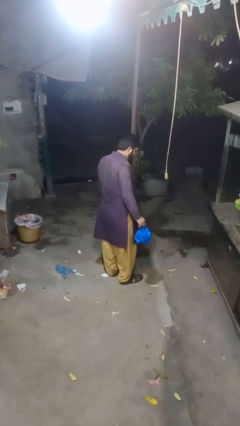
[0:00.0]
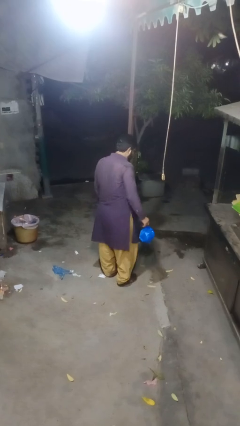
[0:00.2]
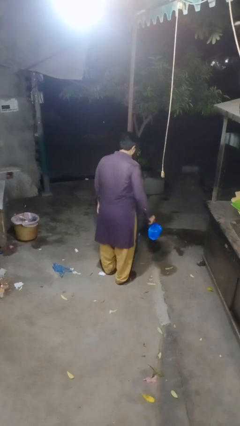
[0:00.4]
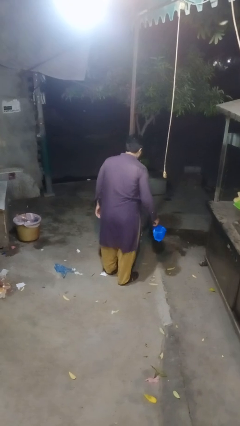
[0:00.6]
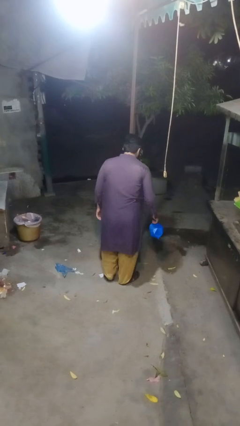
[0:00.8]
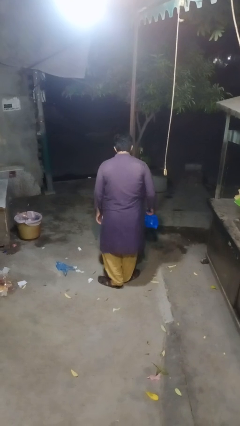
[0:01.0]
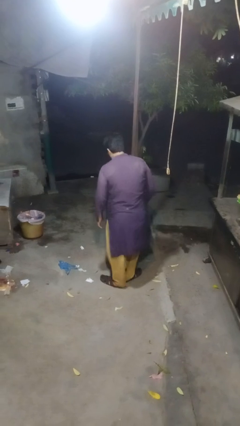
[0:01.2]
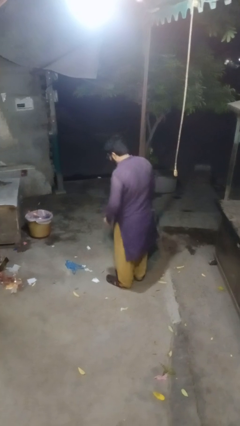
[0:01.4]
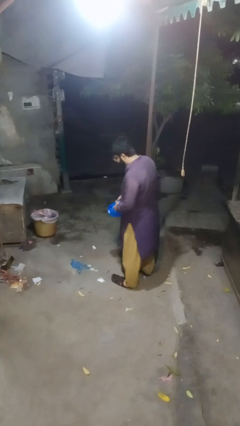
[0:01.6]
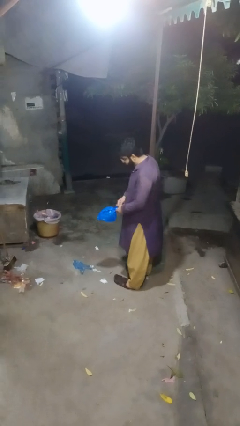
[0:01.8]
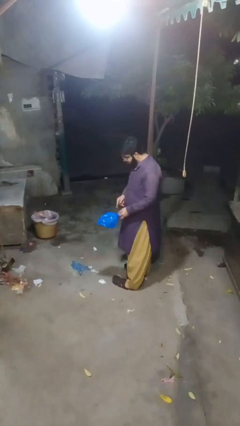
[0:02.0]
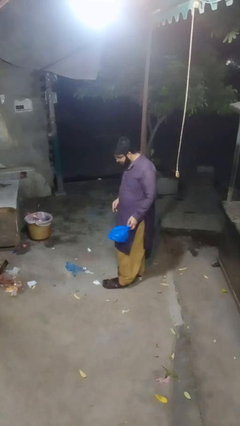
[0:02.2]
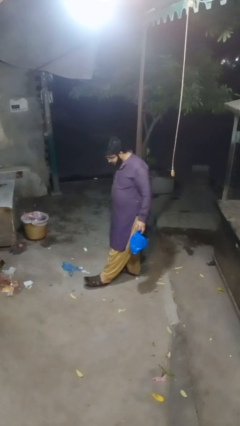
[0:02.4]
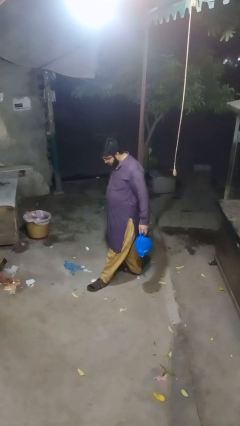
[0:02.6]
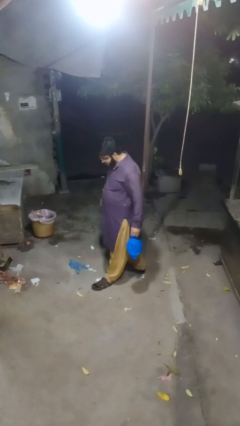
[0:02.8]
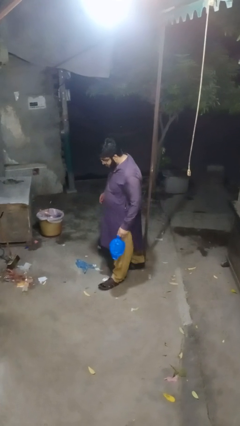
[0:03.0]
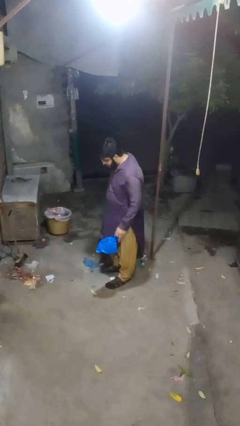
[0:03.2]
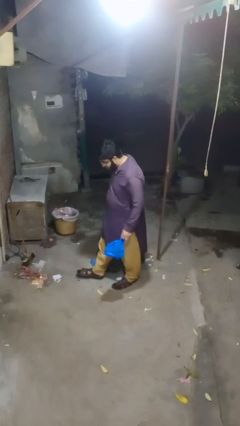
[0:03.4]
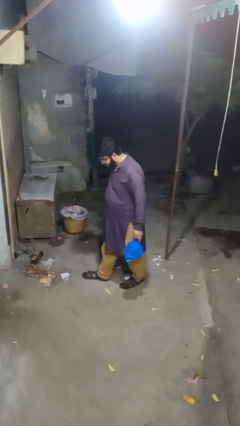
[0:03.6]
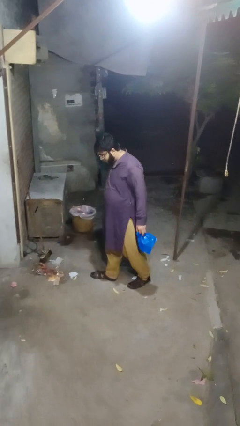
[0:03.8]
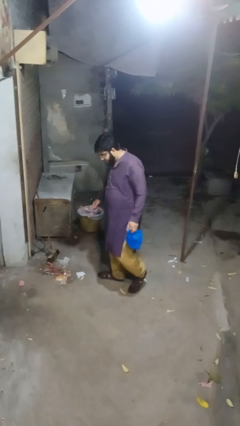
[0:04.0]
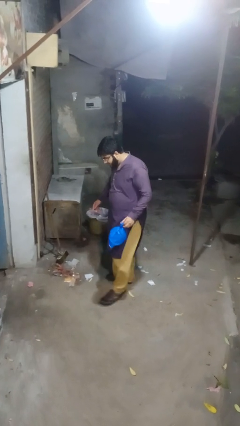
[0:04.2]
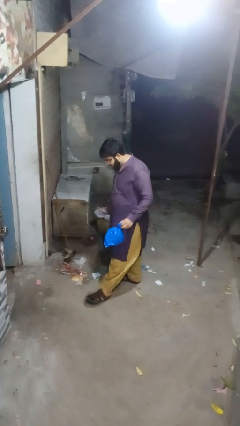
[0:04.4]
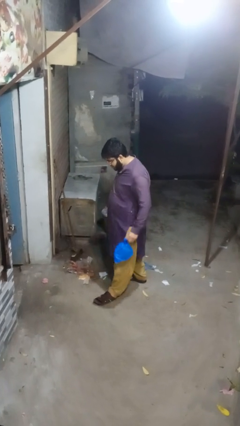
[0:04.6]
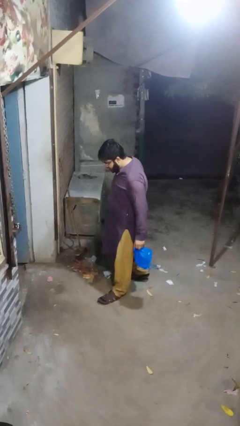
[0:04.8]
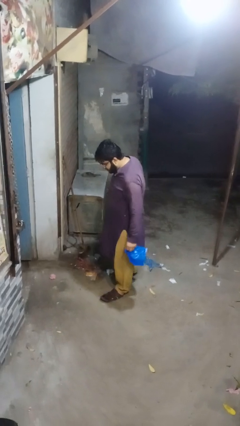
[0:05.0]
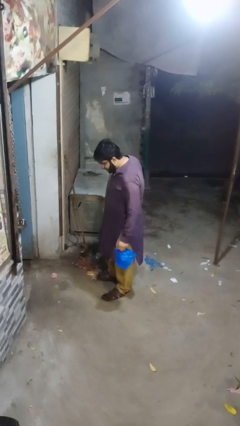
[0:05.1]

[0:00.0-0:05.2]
person carries groceries

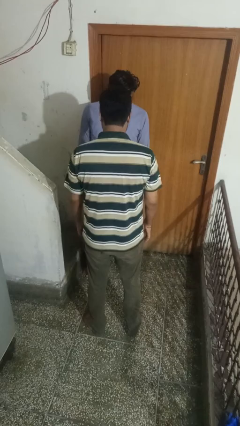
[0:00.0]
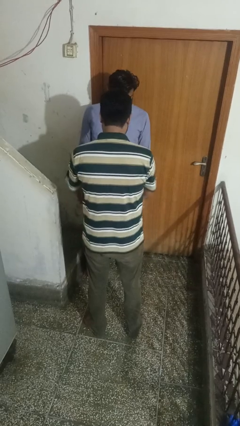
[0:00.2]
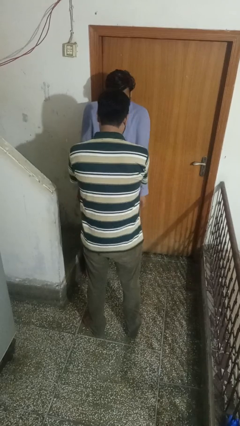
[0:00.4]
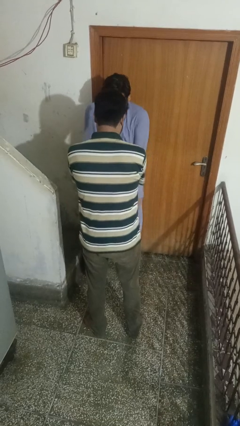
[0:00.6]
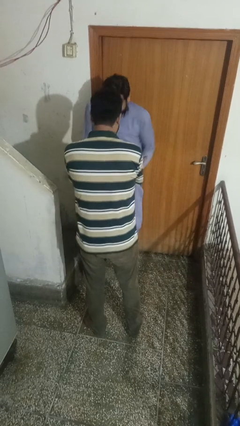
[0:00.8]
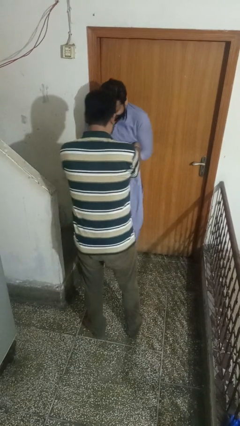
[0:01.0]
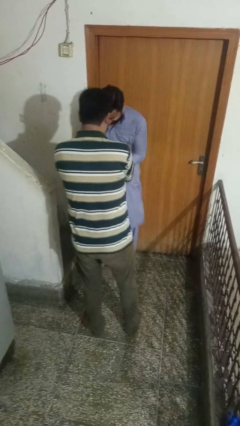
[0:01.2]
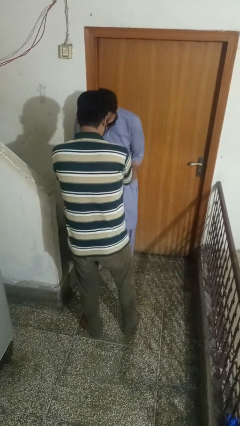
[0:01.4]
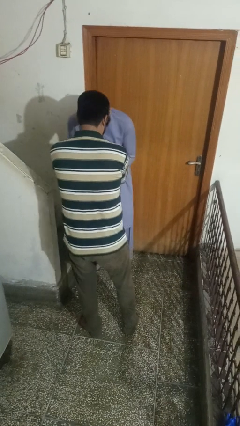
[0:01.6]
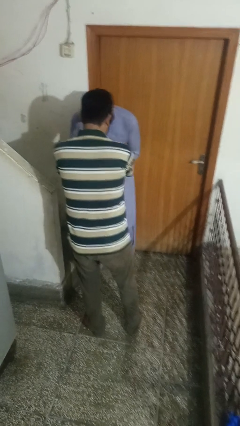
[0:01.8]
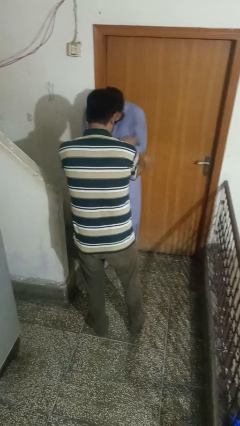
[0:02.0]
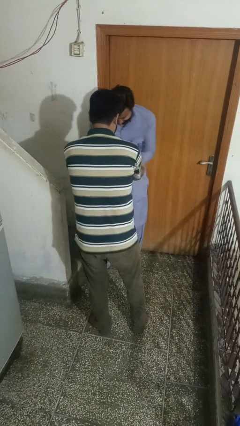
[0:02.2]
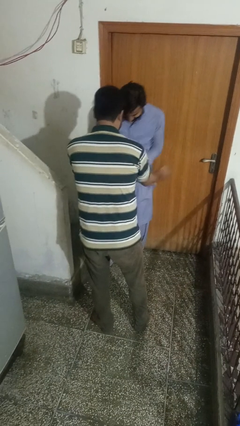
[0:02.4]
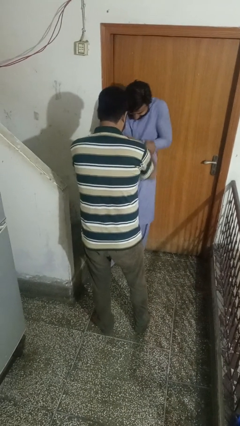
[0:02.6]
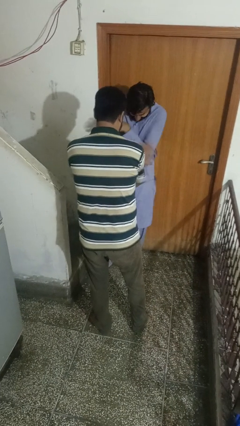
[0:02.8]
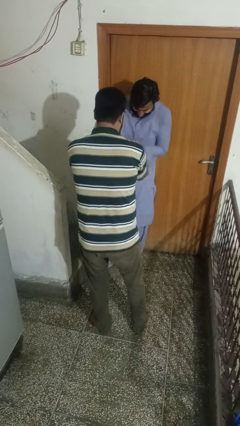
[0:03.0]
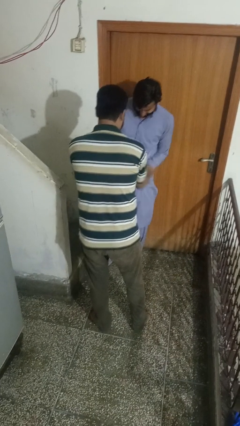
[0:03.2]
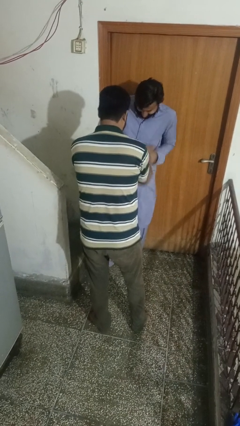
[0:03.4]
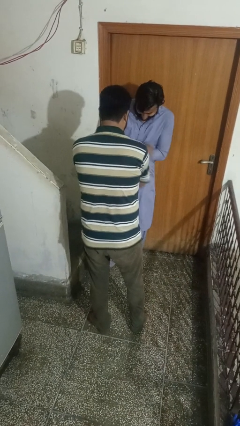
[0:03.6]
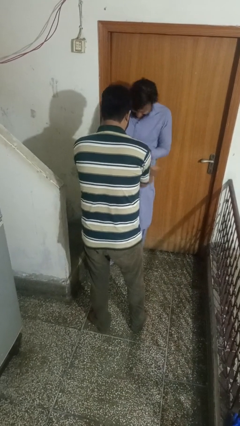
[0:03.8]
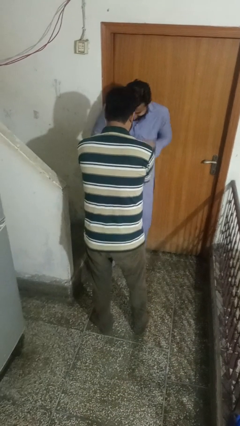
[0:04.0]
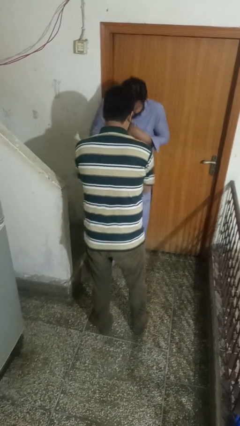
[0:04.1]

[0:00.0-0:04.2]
person tickles person

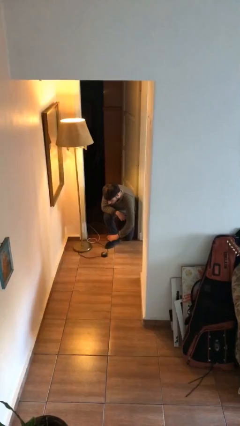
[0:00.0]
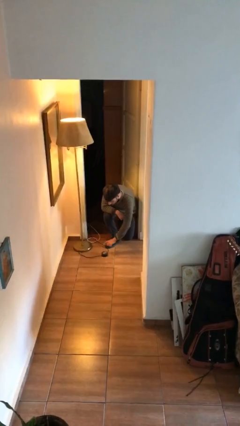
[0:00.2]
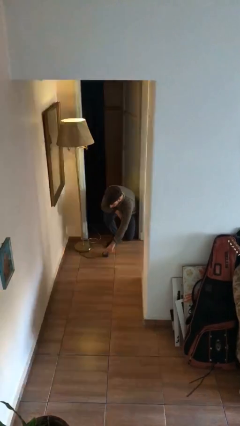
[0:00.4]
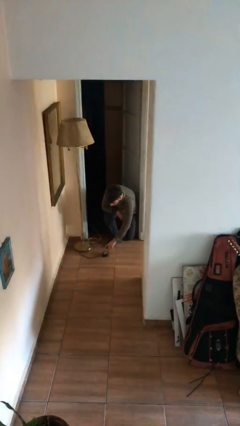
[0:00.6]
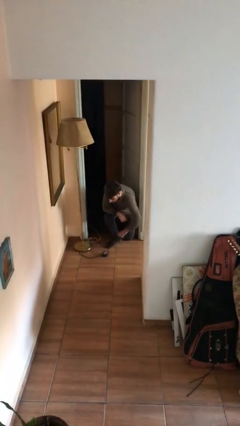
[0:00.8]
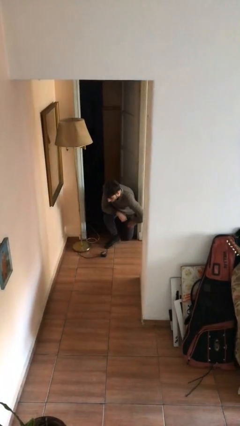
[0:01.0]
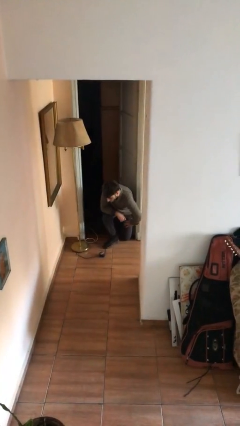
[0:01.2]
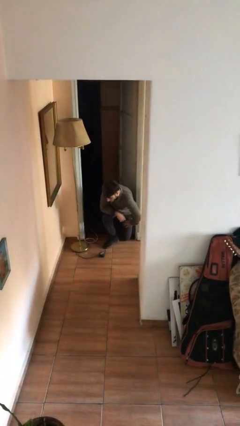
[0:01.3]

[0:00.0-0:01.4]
person turns off lamp

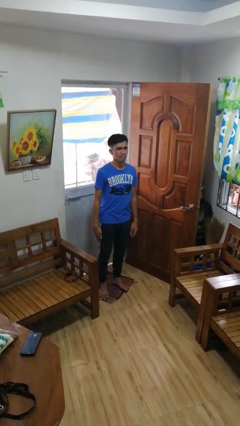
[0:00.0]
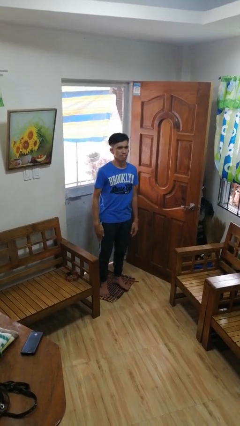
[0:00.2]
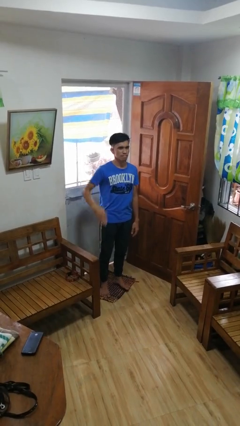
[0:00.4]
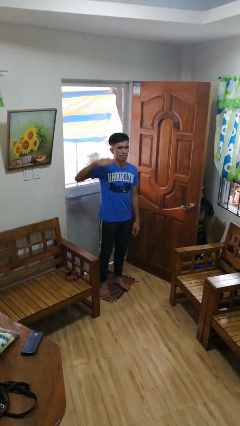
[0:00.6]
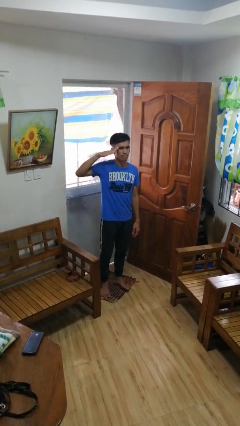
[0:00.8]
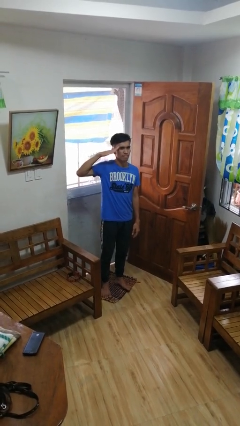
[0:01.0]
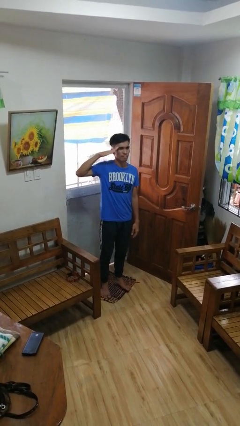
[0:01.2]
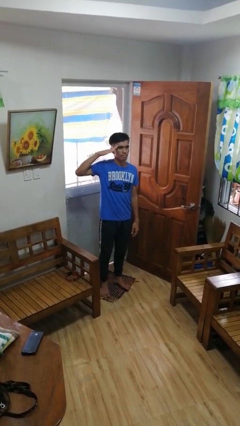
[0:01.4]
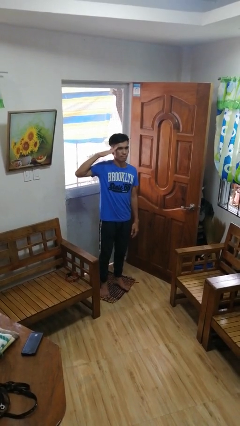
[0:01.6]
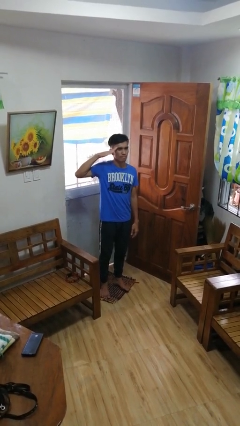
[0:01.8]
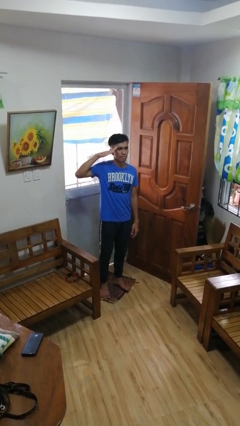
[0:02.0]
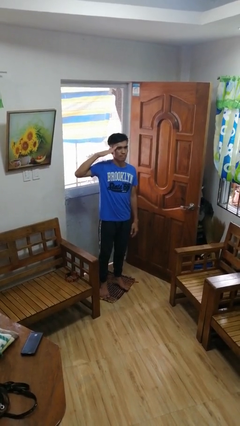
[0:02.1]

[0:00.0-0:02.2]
person salutes

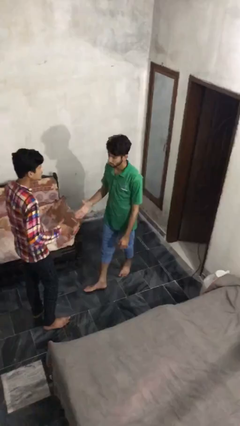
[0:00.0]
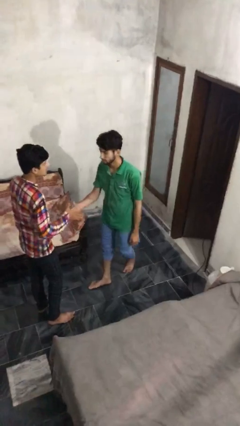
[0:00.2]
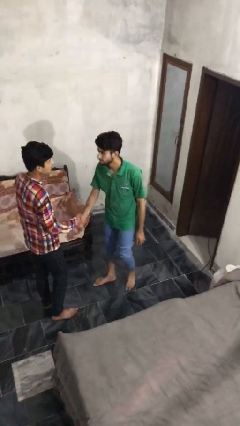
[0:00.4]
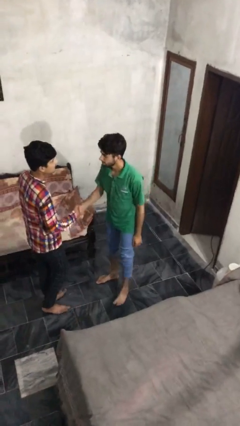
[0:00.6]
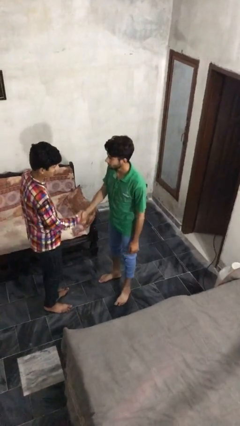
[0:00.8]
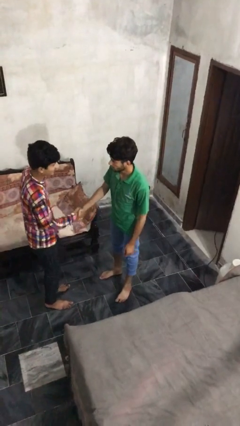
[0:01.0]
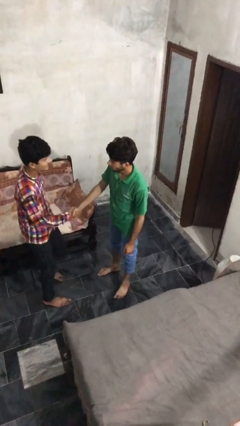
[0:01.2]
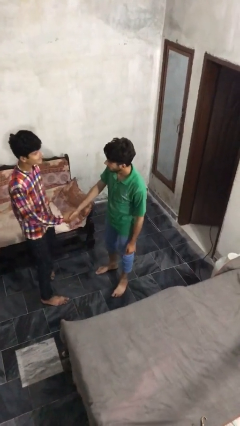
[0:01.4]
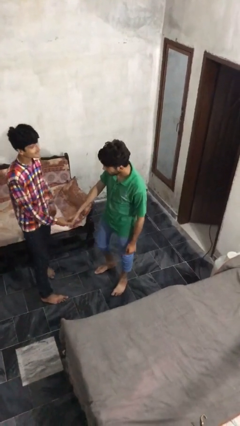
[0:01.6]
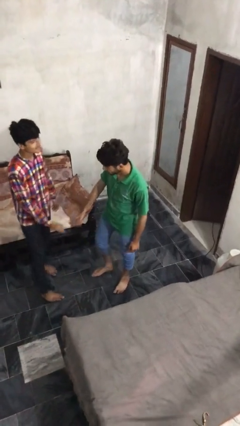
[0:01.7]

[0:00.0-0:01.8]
person shakes hand

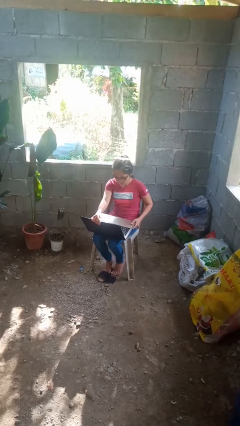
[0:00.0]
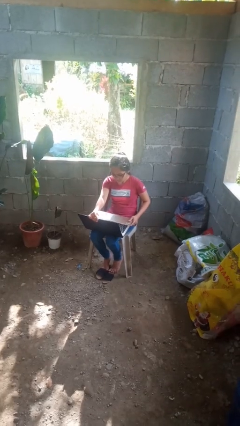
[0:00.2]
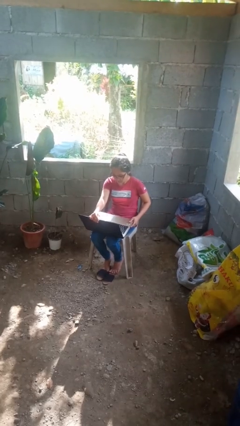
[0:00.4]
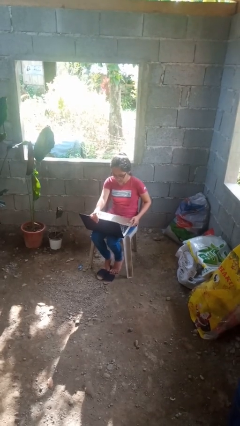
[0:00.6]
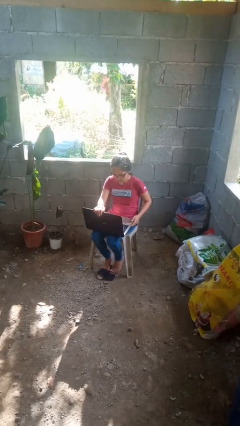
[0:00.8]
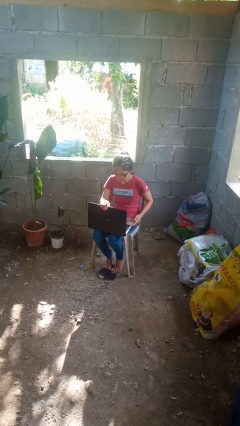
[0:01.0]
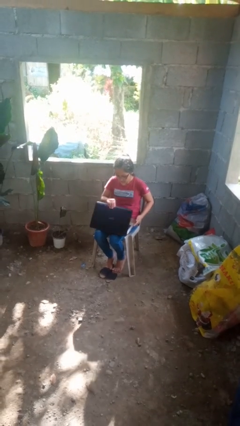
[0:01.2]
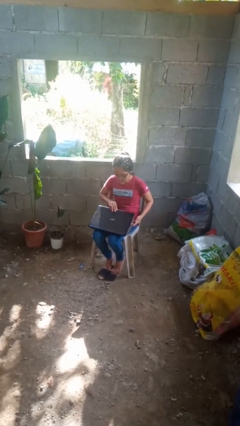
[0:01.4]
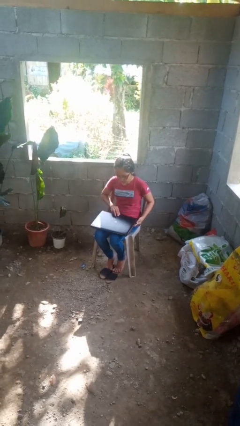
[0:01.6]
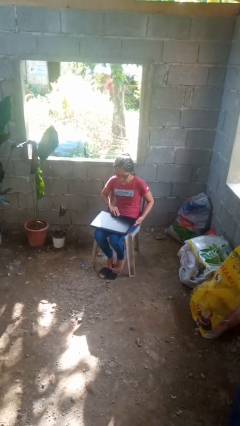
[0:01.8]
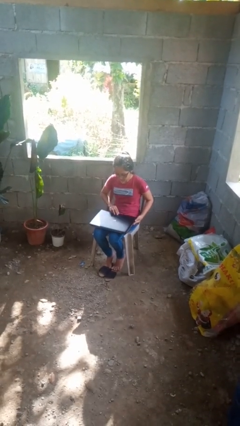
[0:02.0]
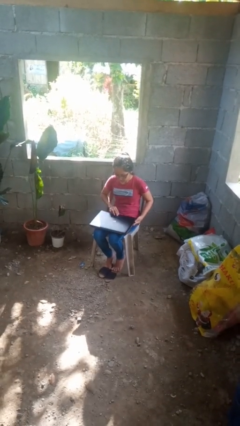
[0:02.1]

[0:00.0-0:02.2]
person closes laptop

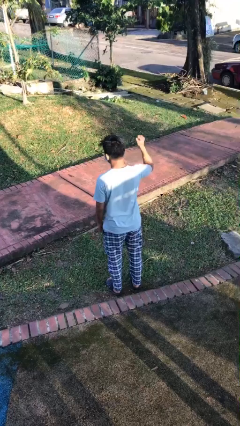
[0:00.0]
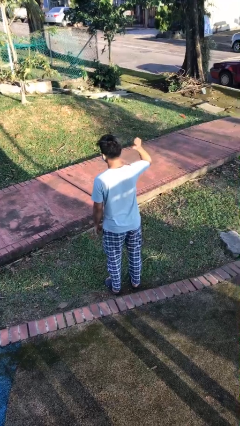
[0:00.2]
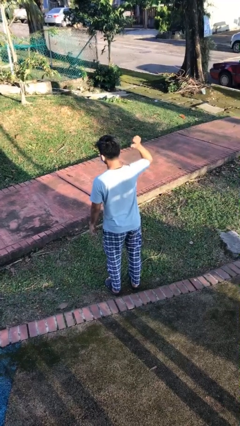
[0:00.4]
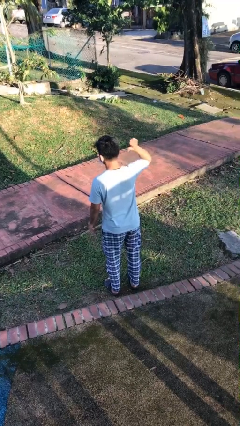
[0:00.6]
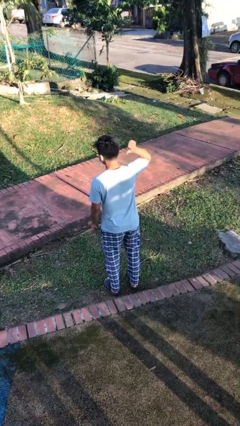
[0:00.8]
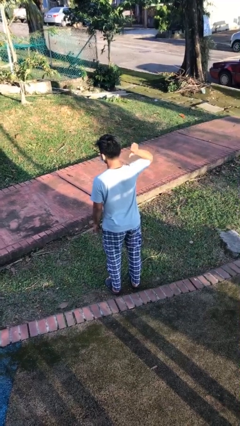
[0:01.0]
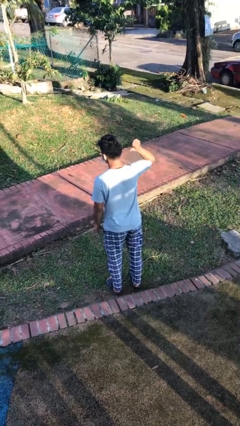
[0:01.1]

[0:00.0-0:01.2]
person gestures behind me
